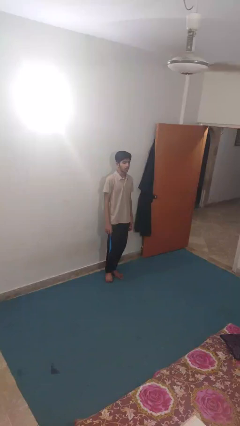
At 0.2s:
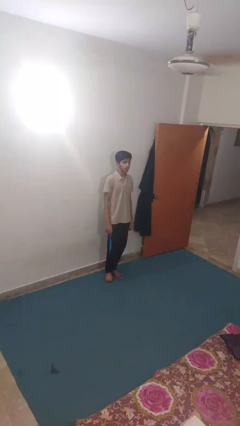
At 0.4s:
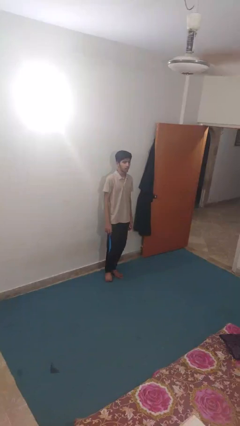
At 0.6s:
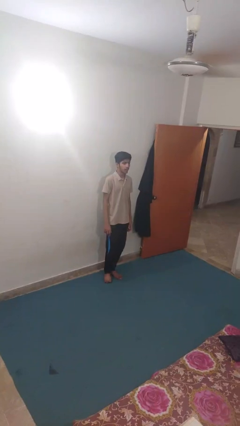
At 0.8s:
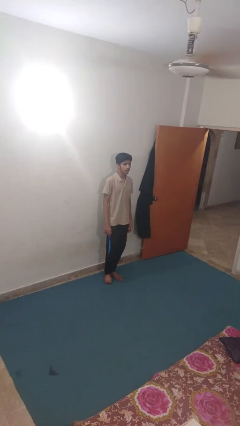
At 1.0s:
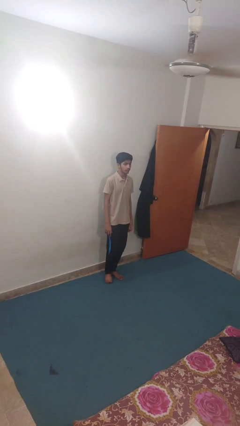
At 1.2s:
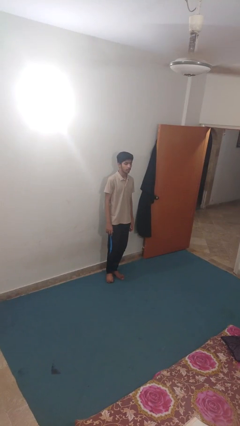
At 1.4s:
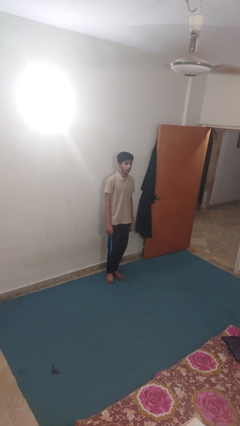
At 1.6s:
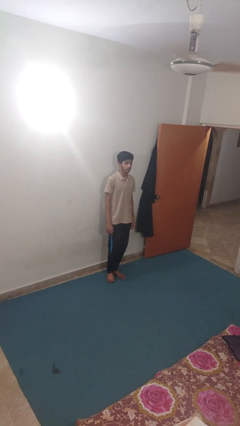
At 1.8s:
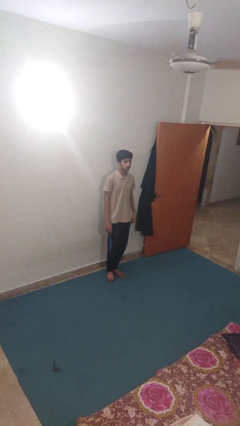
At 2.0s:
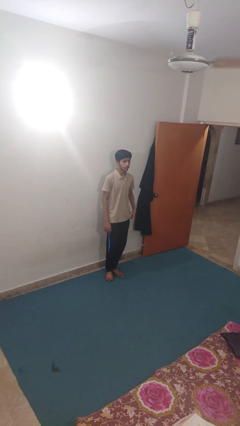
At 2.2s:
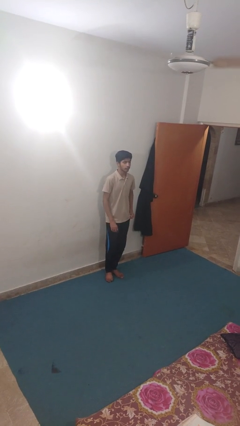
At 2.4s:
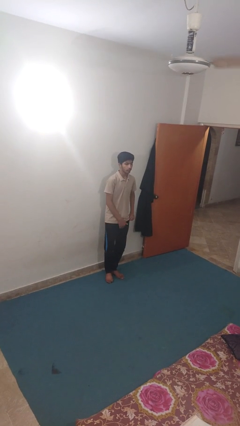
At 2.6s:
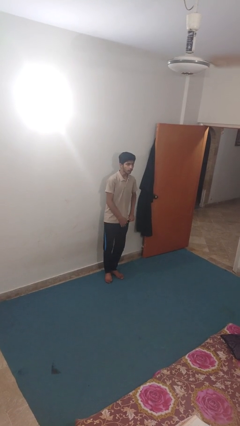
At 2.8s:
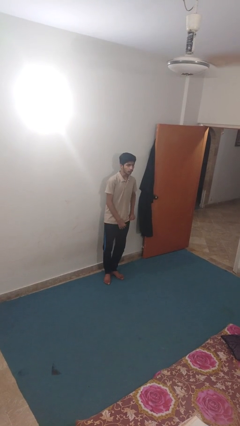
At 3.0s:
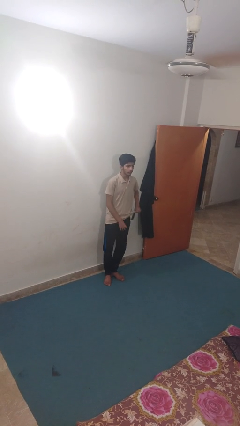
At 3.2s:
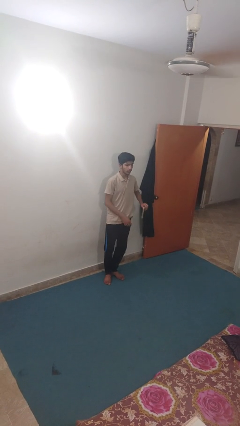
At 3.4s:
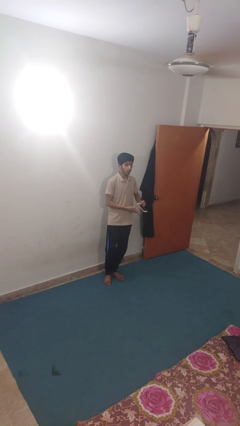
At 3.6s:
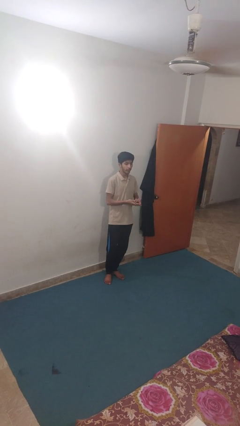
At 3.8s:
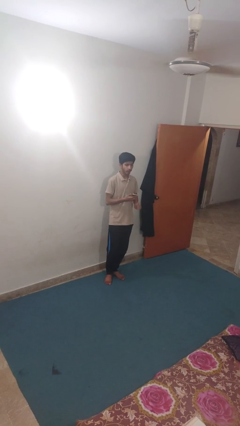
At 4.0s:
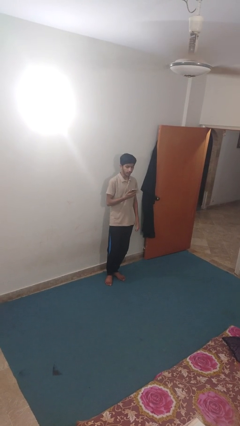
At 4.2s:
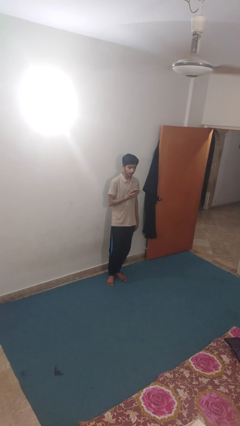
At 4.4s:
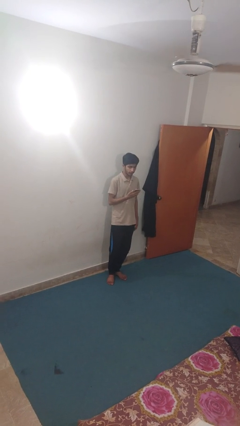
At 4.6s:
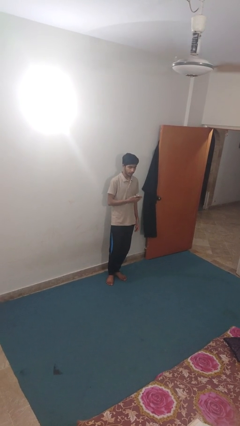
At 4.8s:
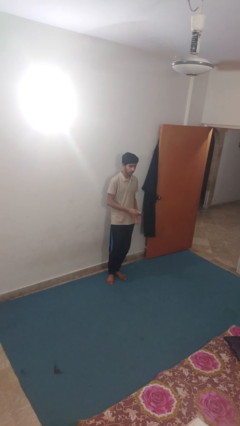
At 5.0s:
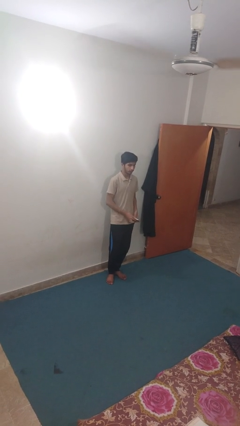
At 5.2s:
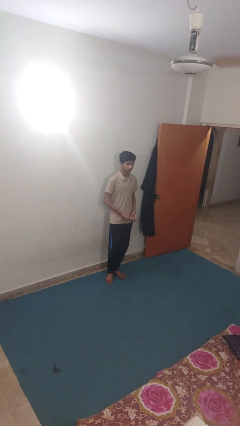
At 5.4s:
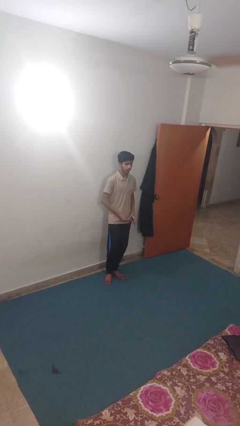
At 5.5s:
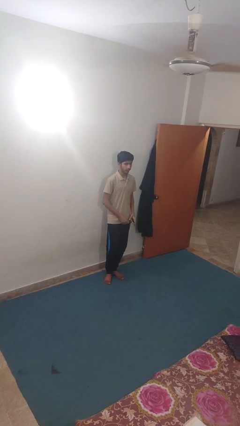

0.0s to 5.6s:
person takes phone from pocket

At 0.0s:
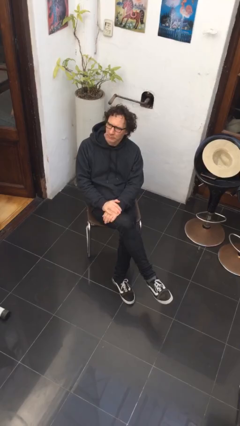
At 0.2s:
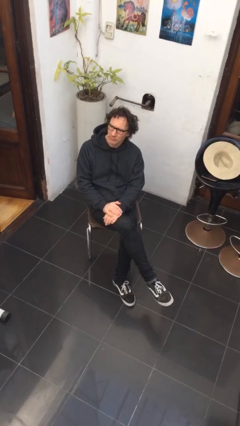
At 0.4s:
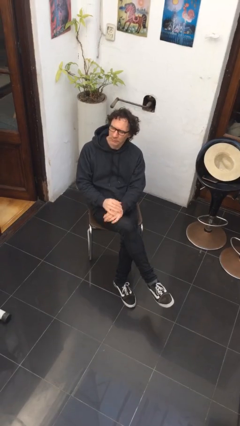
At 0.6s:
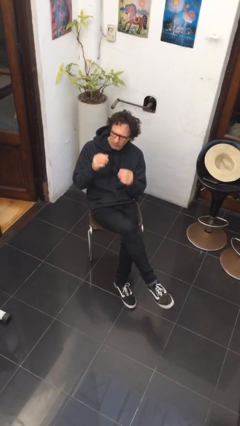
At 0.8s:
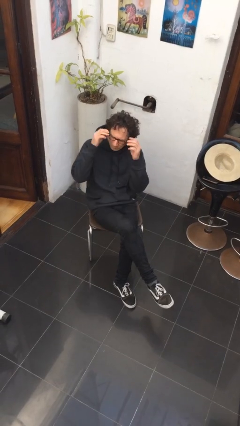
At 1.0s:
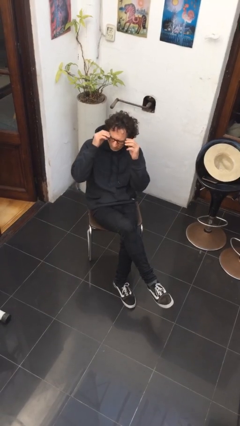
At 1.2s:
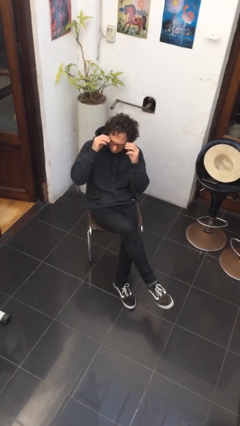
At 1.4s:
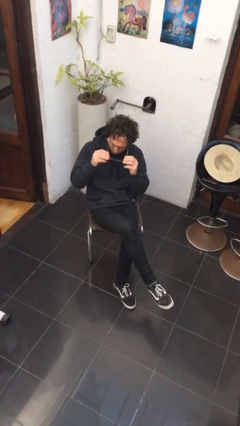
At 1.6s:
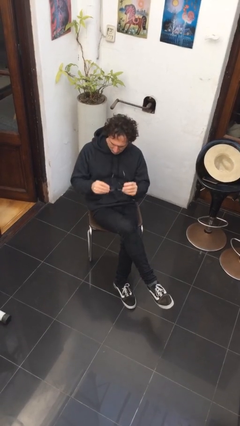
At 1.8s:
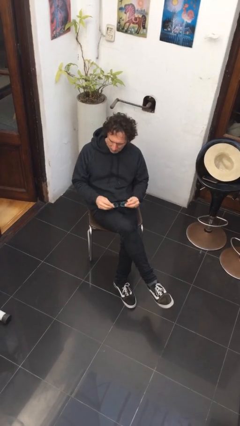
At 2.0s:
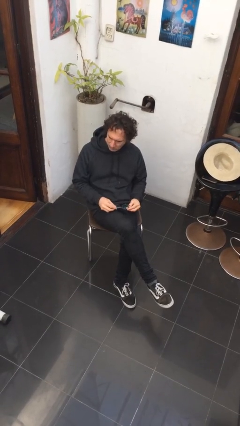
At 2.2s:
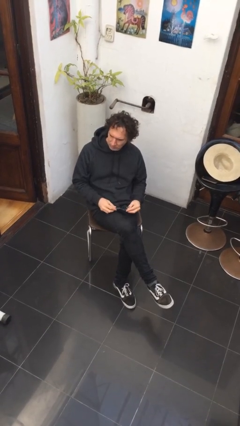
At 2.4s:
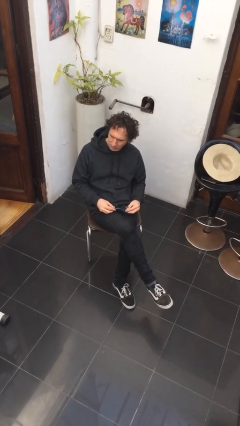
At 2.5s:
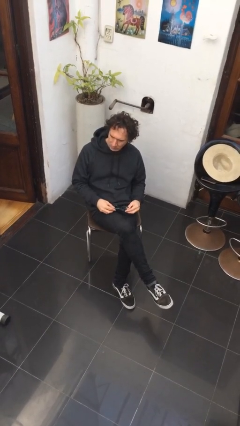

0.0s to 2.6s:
person takes off glasses

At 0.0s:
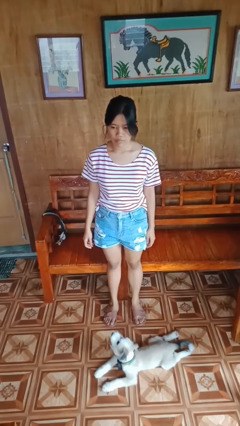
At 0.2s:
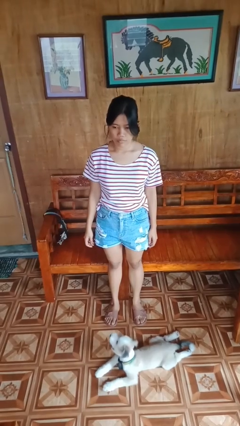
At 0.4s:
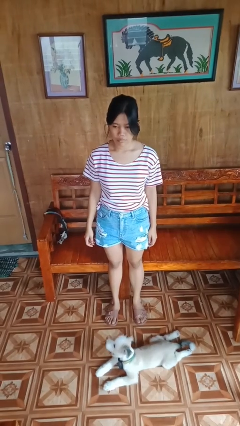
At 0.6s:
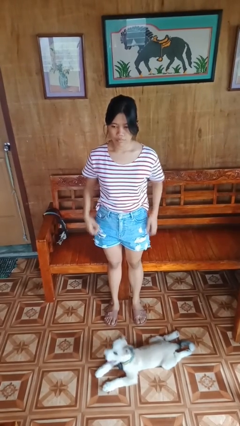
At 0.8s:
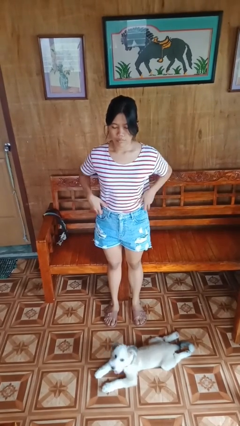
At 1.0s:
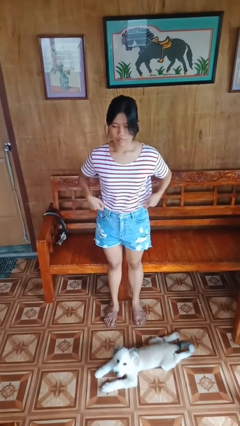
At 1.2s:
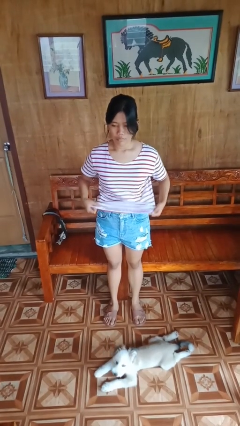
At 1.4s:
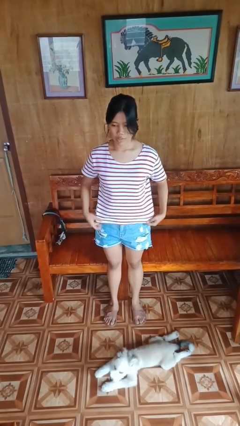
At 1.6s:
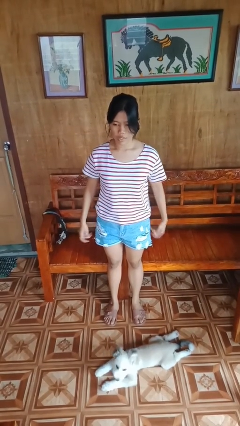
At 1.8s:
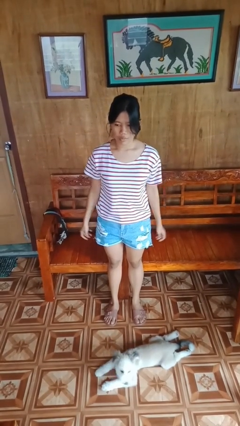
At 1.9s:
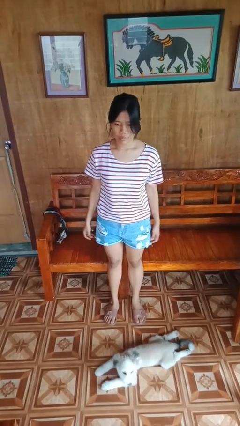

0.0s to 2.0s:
person untucks shirt

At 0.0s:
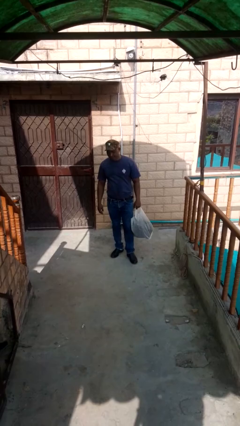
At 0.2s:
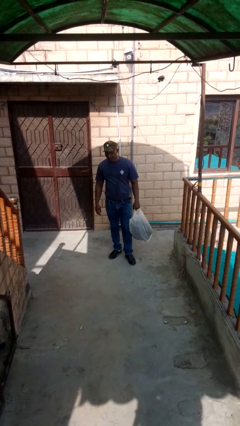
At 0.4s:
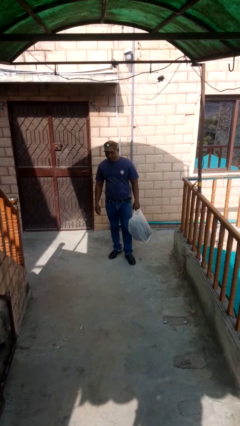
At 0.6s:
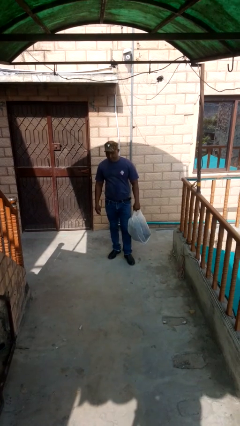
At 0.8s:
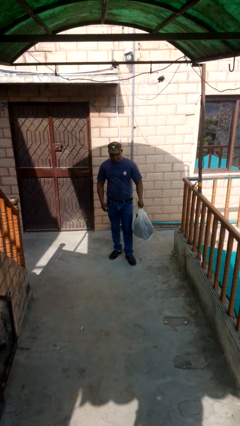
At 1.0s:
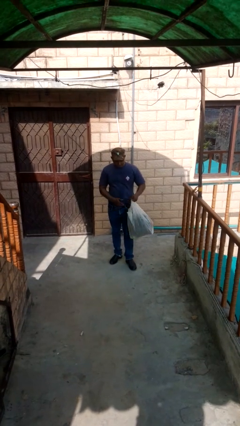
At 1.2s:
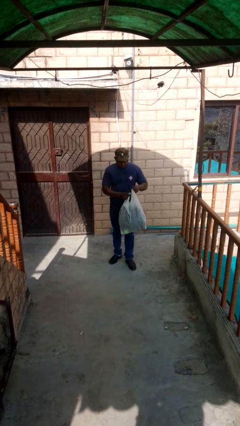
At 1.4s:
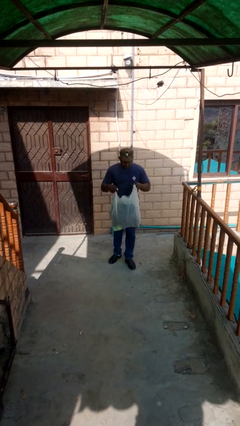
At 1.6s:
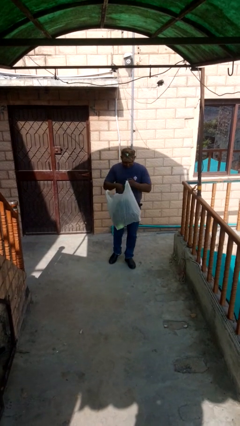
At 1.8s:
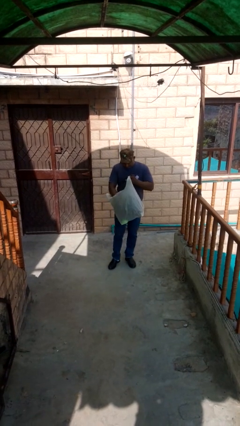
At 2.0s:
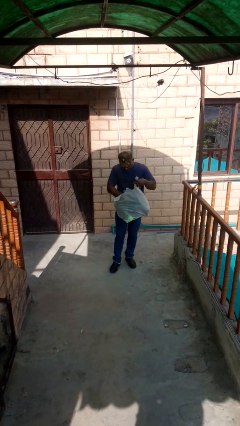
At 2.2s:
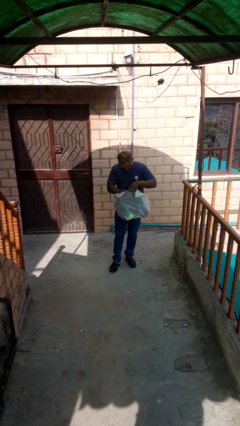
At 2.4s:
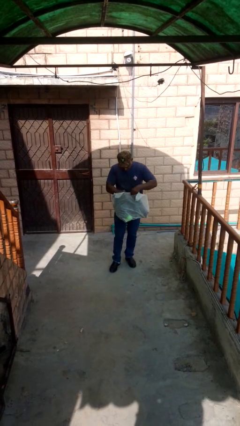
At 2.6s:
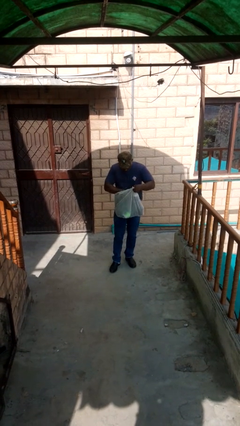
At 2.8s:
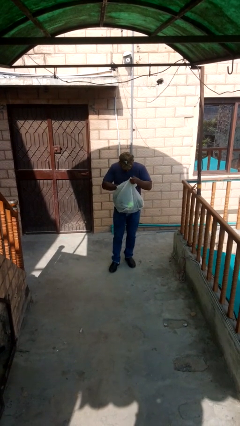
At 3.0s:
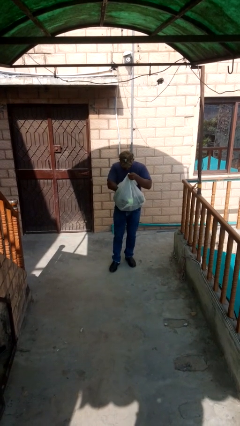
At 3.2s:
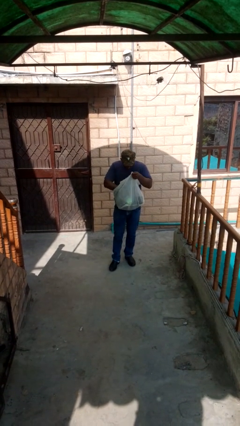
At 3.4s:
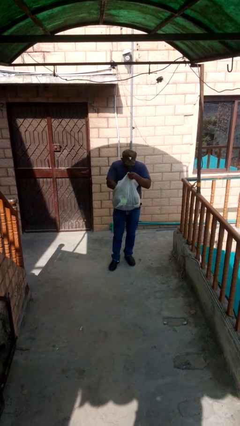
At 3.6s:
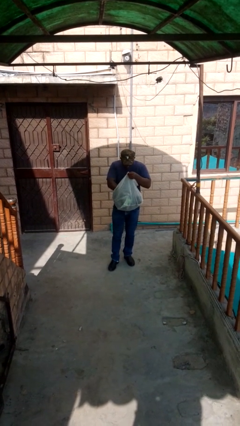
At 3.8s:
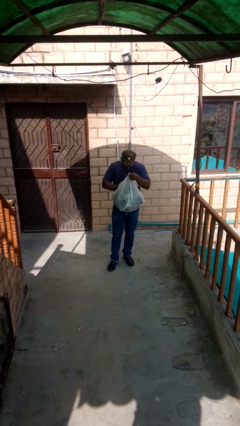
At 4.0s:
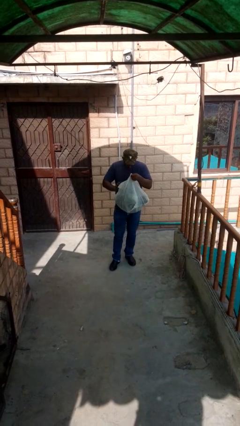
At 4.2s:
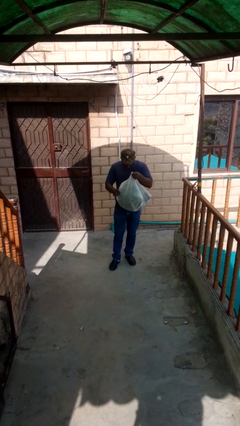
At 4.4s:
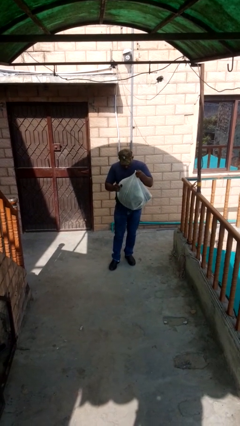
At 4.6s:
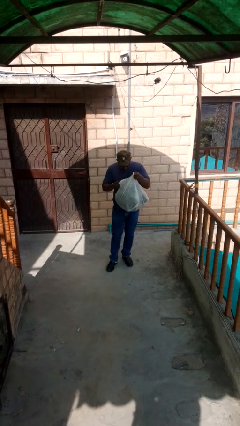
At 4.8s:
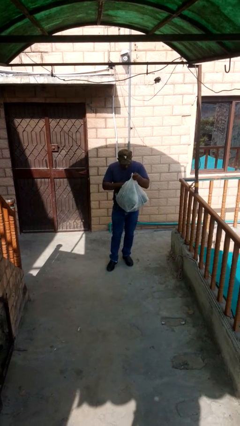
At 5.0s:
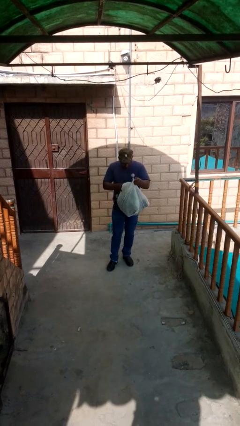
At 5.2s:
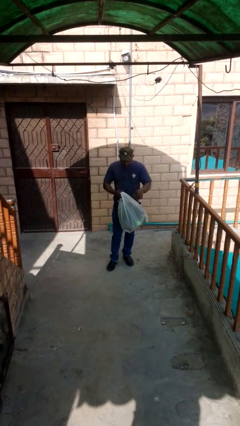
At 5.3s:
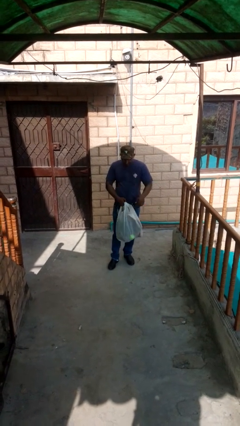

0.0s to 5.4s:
person searches in bag

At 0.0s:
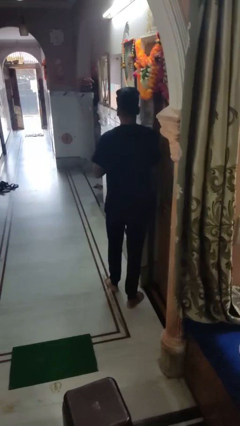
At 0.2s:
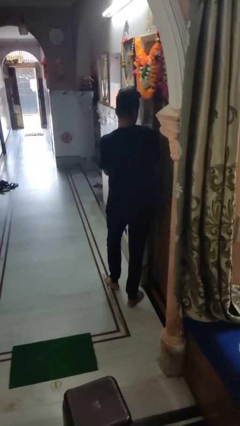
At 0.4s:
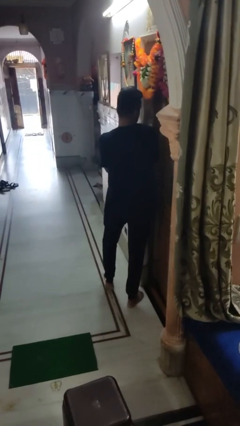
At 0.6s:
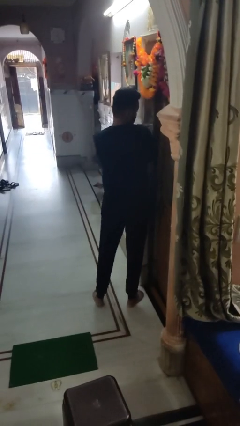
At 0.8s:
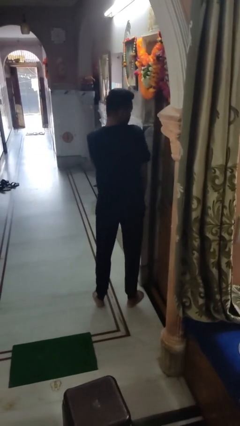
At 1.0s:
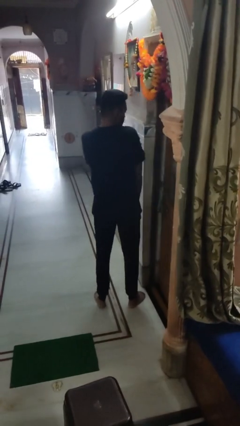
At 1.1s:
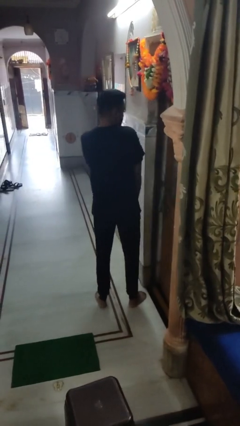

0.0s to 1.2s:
person bumps into wall

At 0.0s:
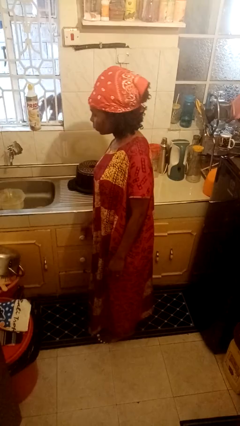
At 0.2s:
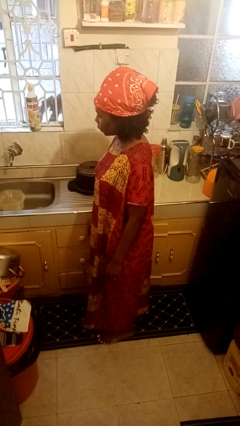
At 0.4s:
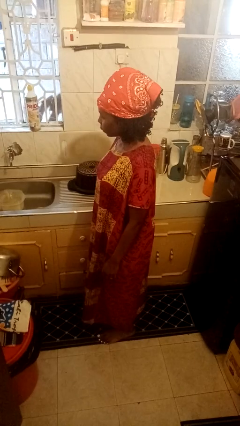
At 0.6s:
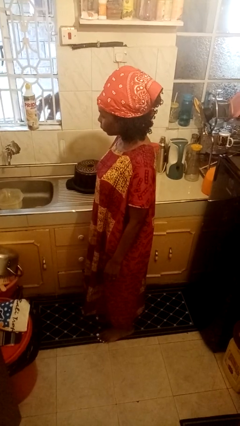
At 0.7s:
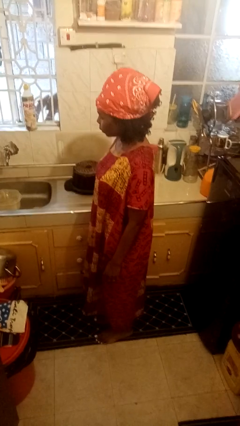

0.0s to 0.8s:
person closes kitchen drawer
